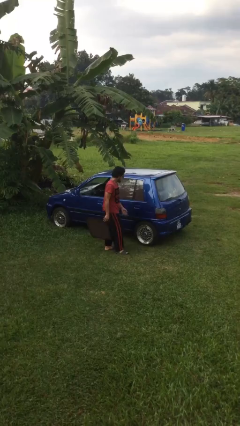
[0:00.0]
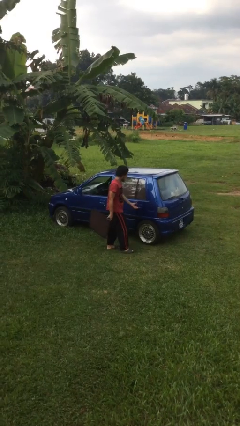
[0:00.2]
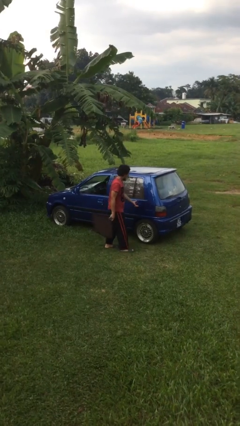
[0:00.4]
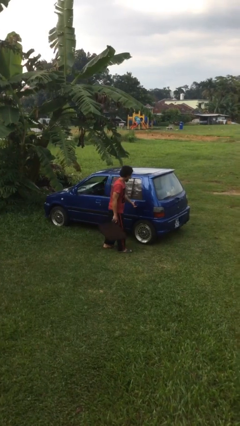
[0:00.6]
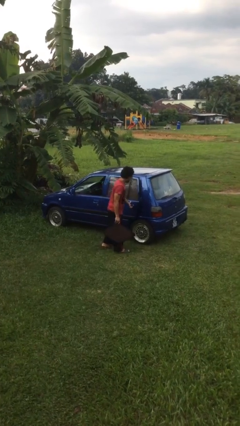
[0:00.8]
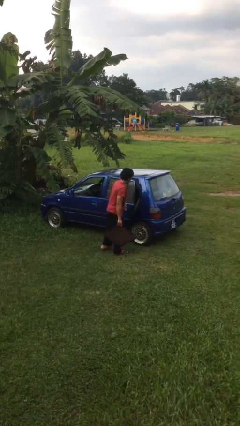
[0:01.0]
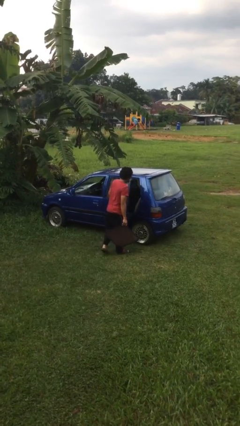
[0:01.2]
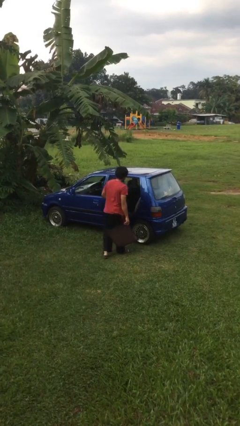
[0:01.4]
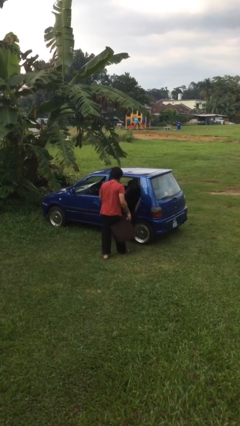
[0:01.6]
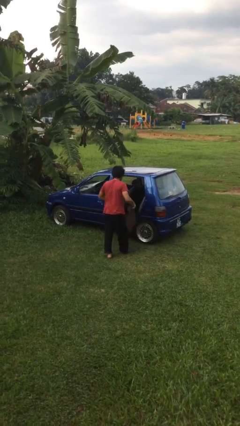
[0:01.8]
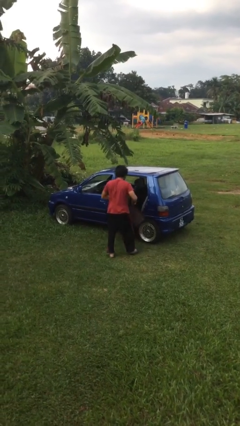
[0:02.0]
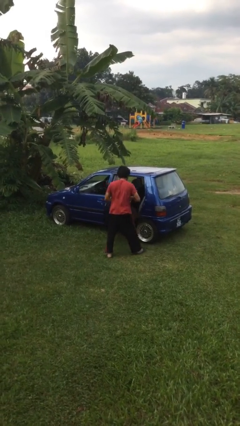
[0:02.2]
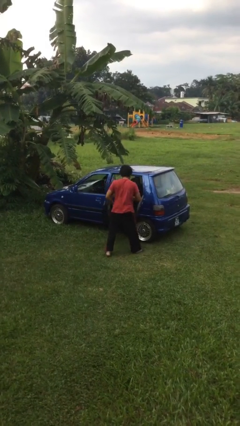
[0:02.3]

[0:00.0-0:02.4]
person opens car door

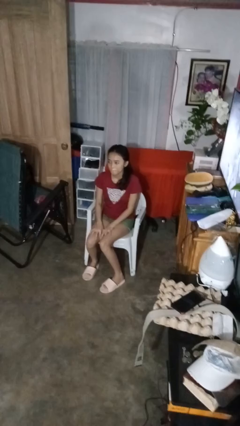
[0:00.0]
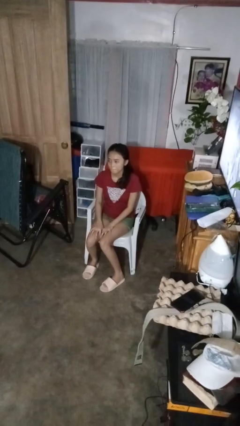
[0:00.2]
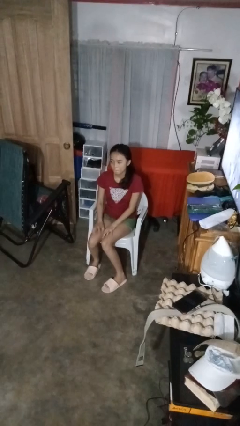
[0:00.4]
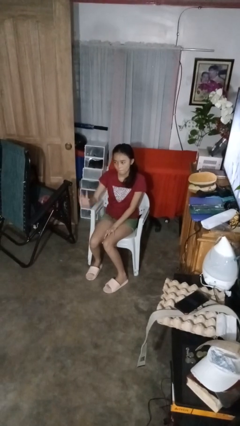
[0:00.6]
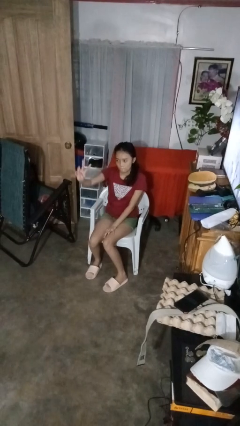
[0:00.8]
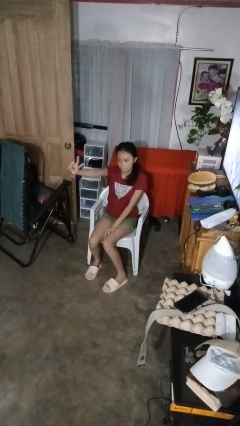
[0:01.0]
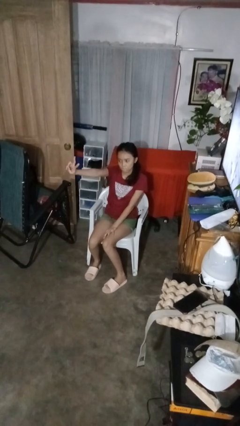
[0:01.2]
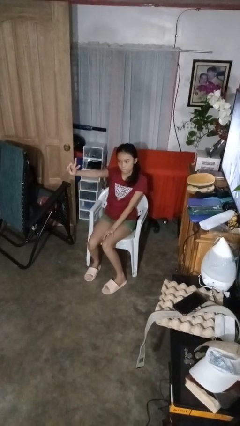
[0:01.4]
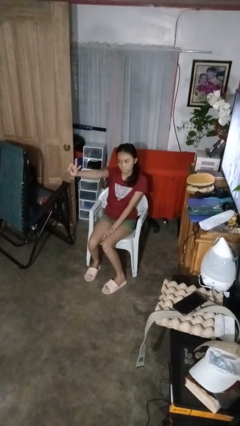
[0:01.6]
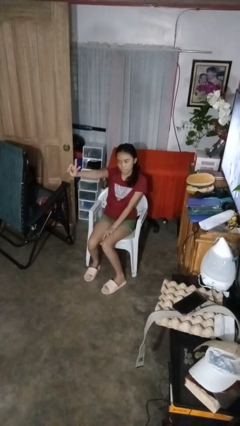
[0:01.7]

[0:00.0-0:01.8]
person gestures peace

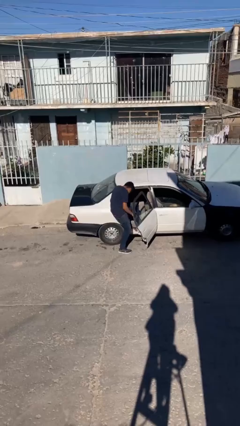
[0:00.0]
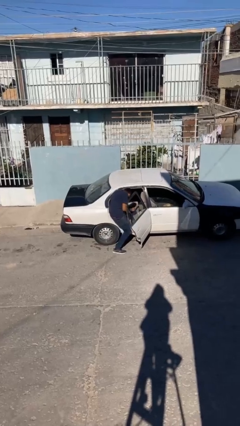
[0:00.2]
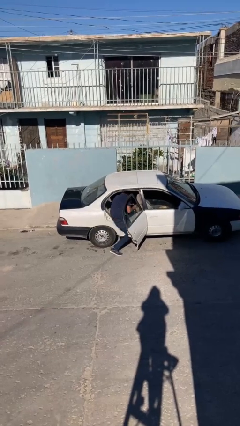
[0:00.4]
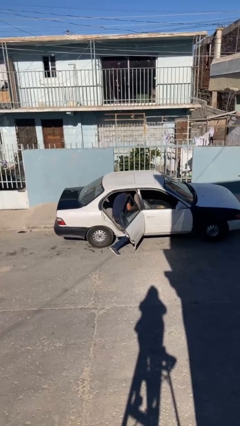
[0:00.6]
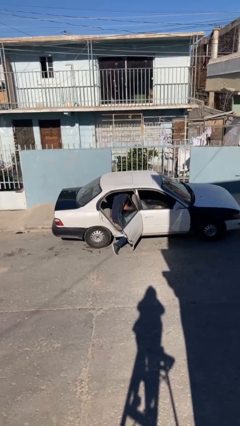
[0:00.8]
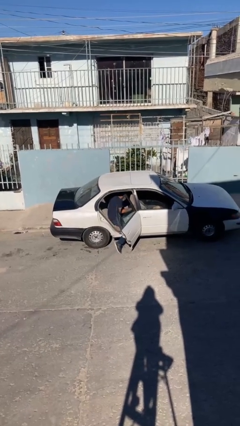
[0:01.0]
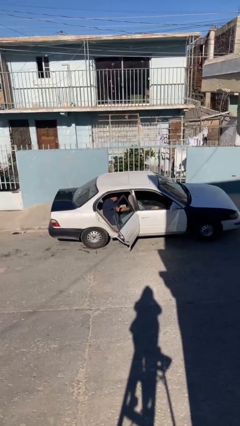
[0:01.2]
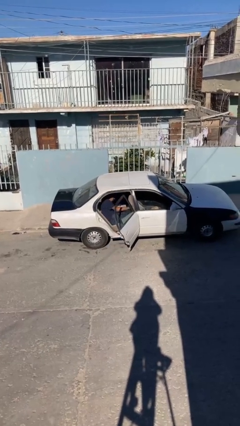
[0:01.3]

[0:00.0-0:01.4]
person enters car

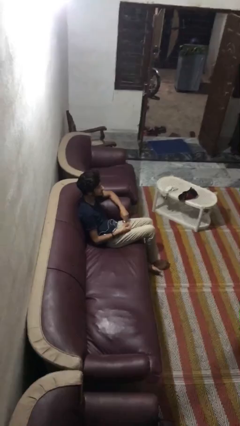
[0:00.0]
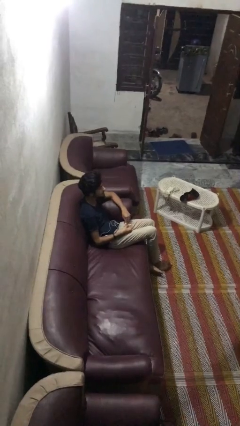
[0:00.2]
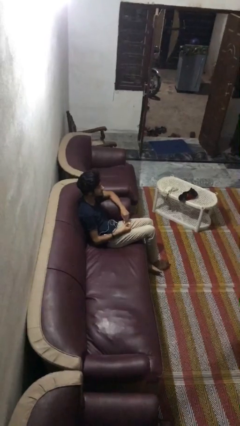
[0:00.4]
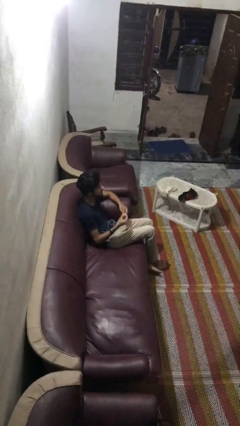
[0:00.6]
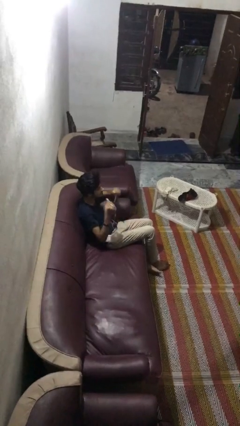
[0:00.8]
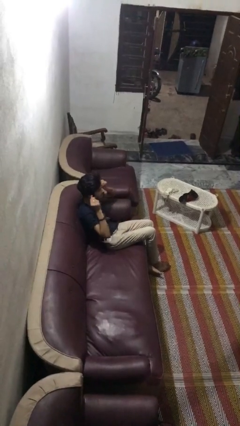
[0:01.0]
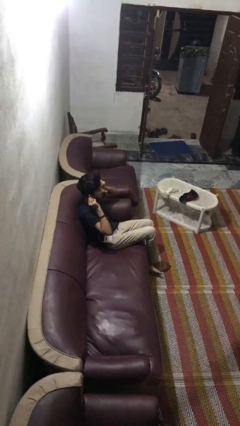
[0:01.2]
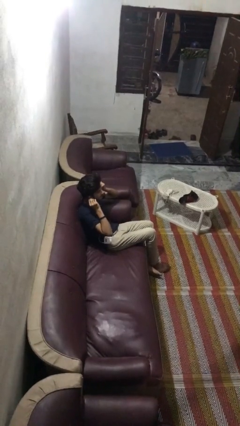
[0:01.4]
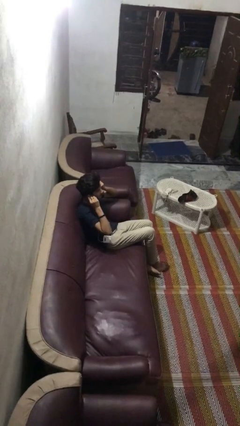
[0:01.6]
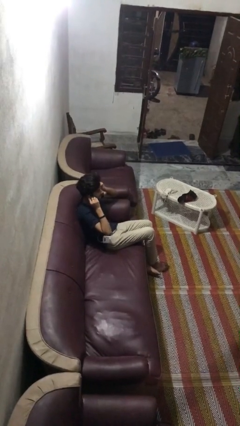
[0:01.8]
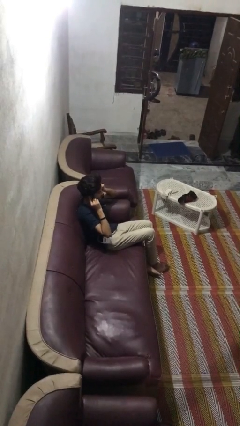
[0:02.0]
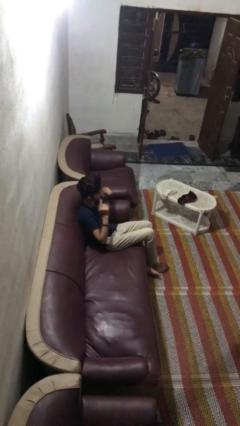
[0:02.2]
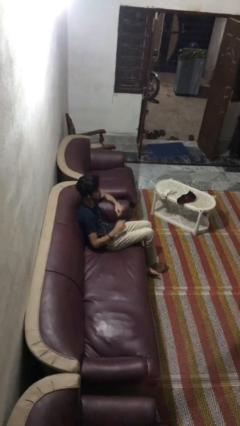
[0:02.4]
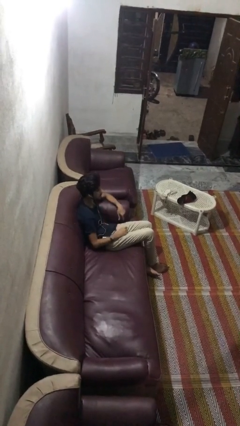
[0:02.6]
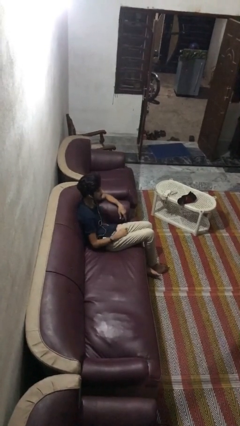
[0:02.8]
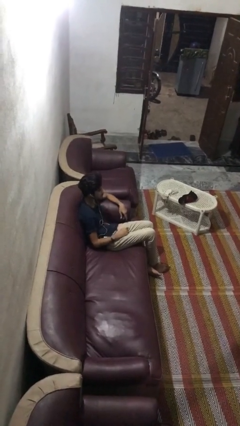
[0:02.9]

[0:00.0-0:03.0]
person puts on headphones

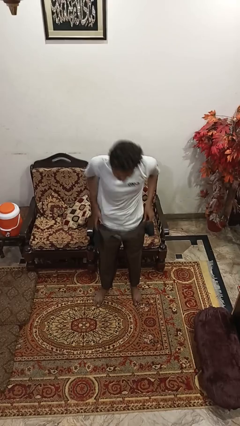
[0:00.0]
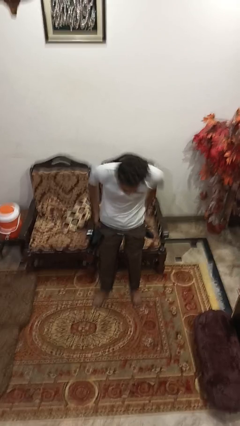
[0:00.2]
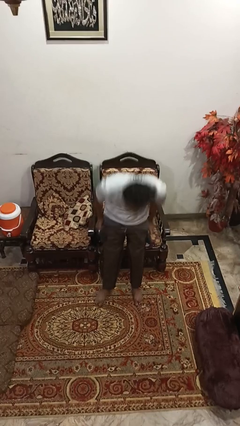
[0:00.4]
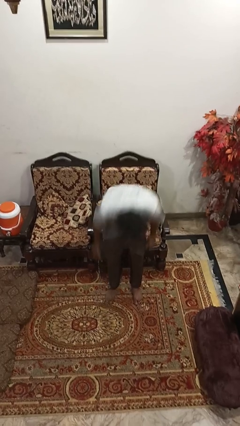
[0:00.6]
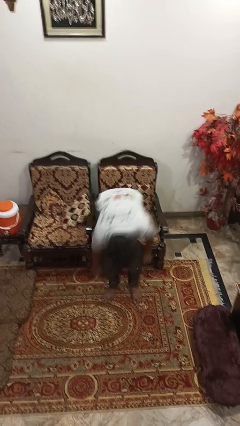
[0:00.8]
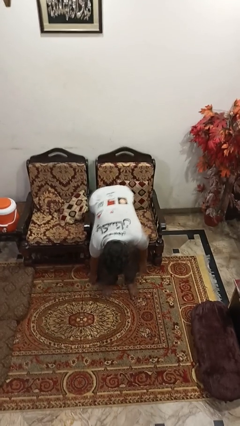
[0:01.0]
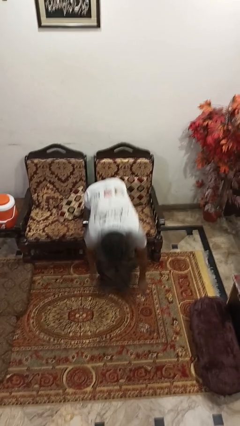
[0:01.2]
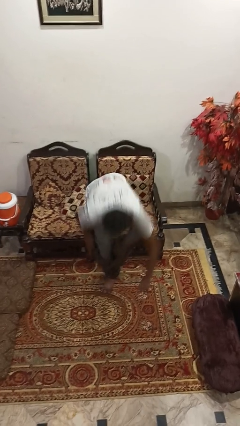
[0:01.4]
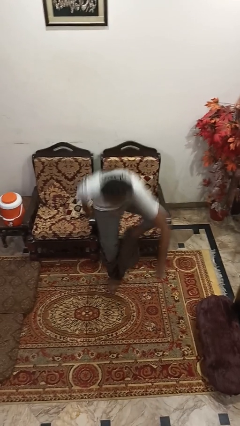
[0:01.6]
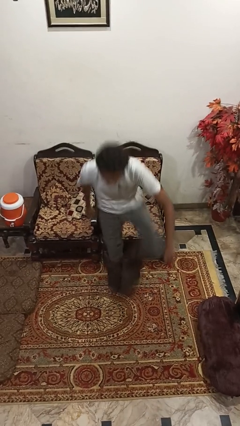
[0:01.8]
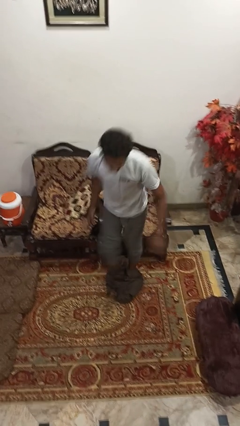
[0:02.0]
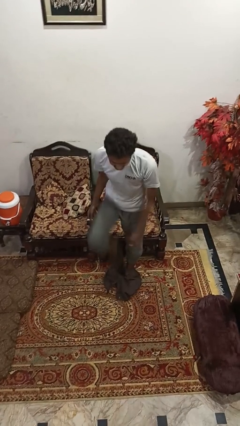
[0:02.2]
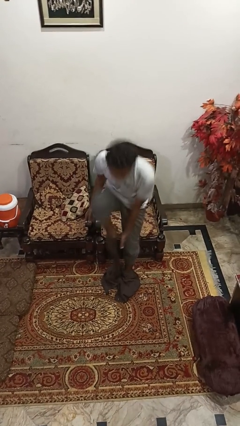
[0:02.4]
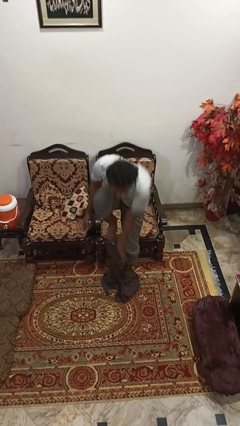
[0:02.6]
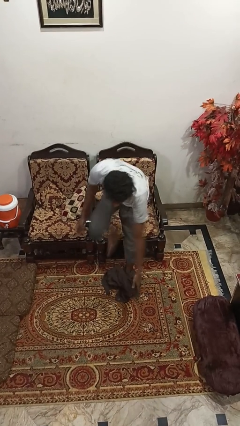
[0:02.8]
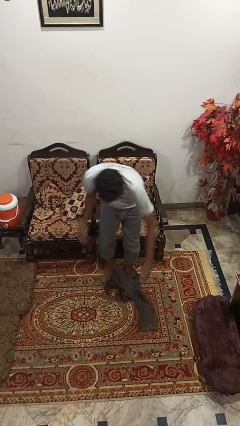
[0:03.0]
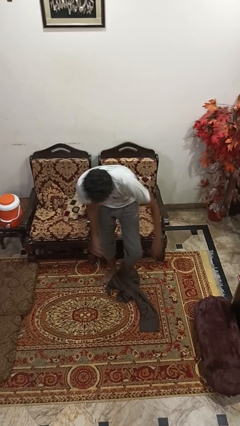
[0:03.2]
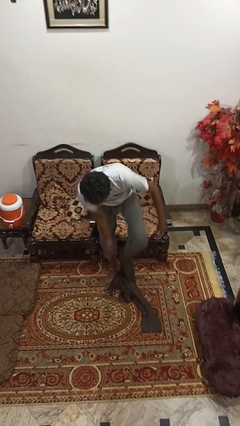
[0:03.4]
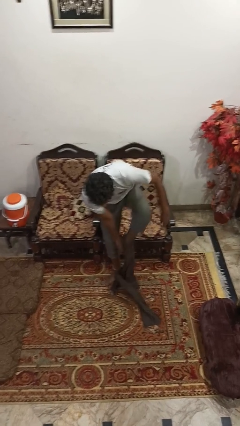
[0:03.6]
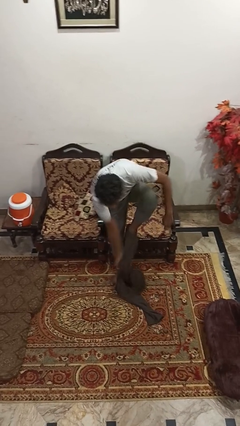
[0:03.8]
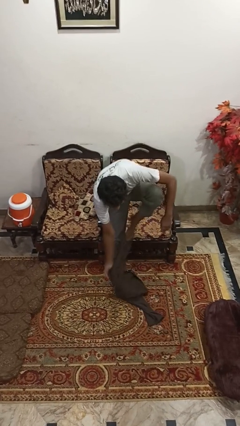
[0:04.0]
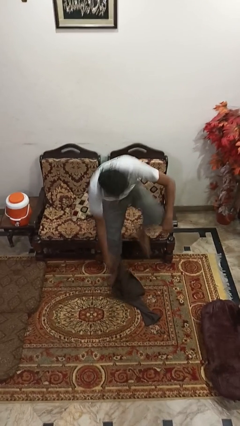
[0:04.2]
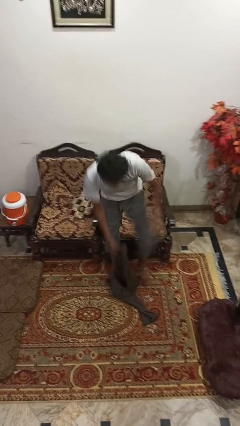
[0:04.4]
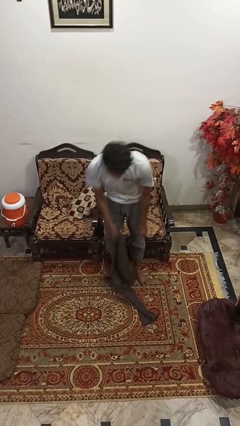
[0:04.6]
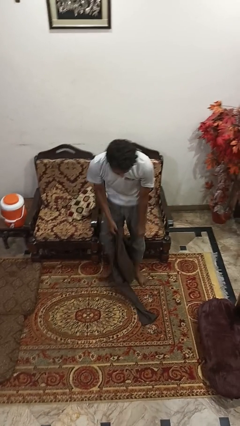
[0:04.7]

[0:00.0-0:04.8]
person takes off pants

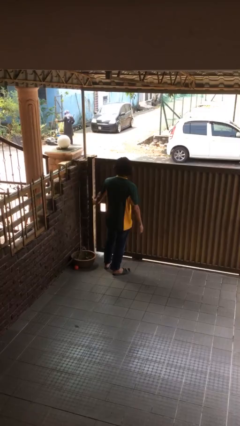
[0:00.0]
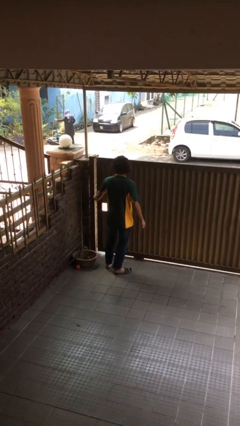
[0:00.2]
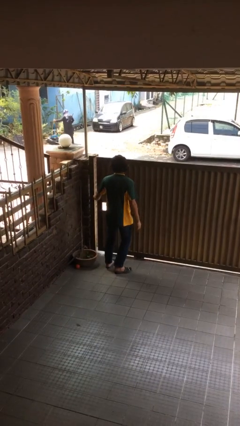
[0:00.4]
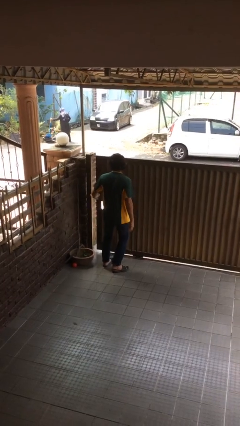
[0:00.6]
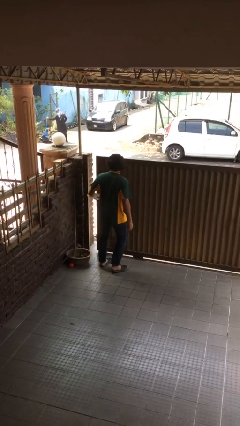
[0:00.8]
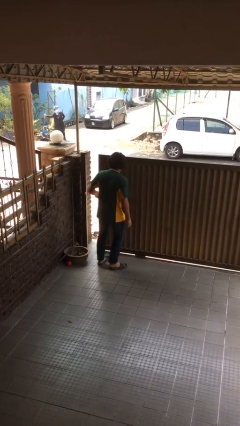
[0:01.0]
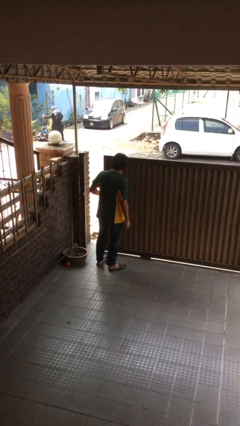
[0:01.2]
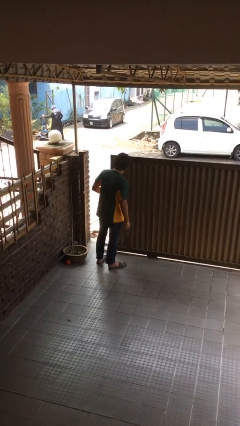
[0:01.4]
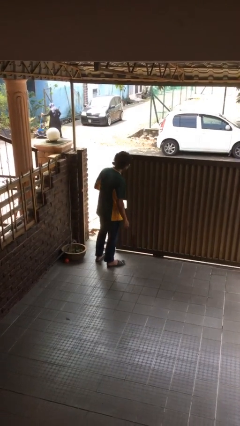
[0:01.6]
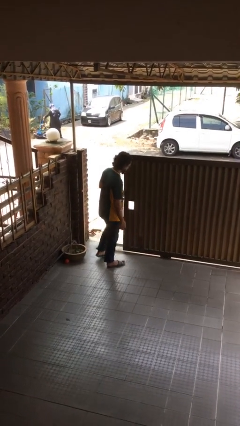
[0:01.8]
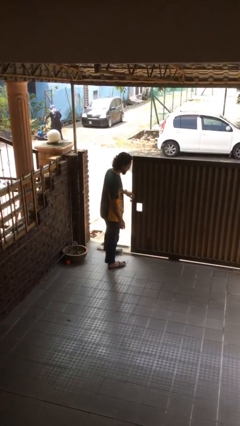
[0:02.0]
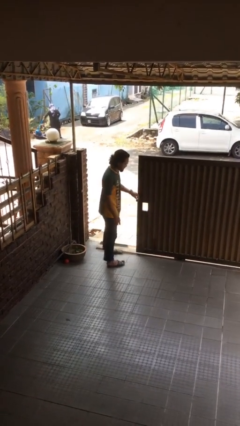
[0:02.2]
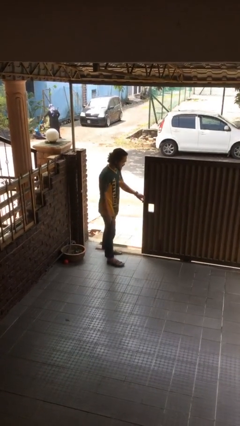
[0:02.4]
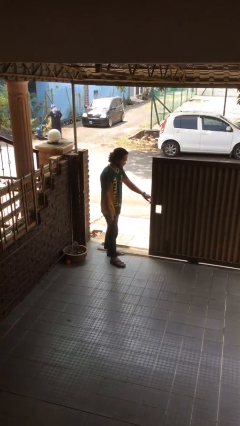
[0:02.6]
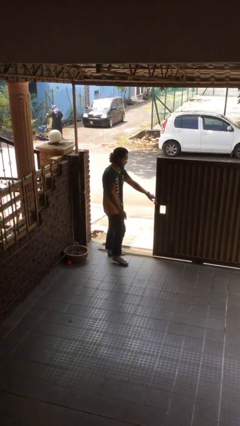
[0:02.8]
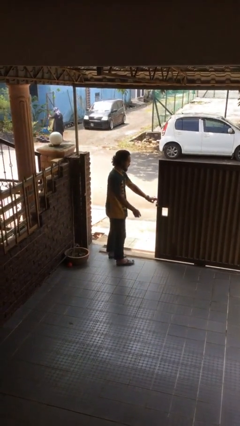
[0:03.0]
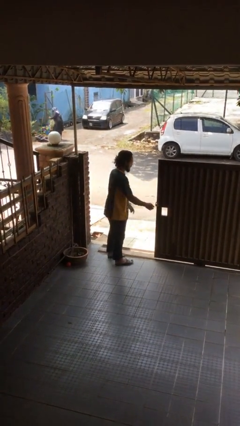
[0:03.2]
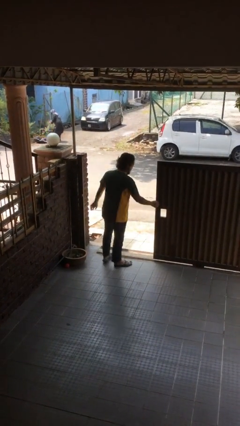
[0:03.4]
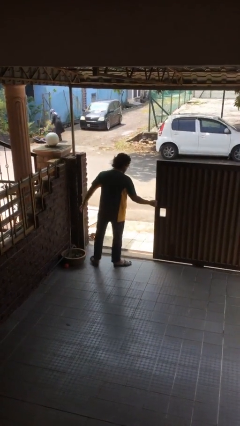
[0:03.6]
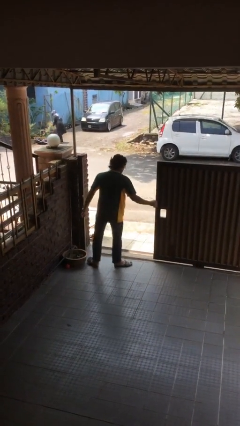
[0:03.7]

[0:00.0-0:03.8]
person opens facility door
